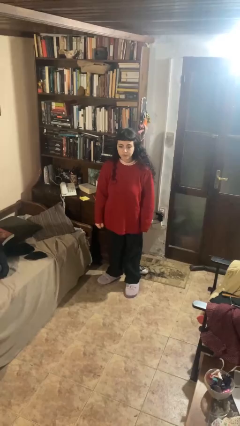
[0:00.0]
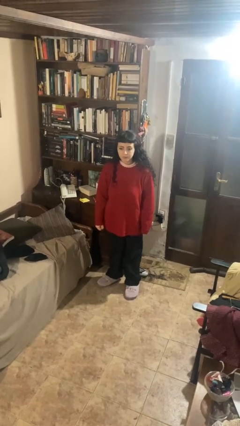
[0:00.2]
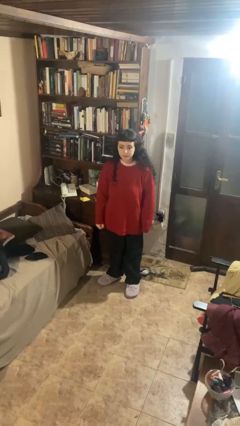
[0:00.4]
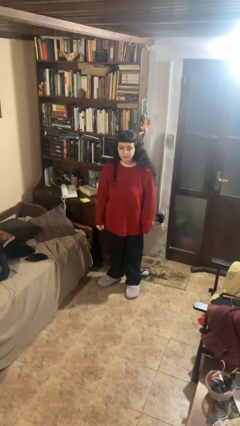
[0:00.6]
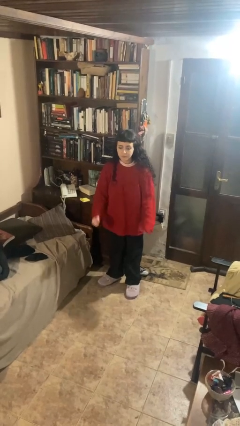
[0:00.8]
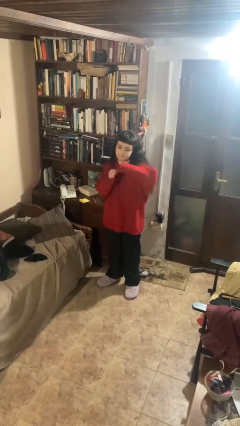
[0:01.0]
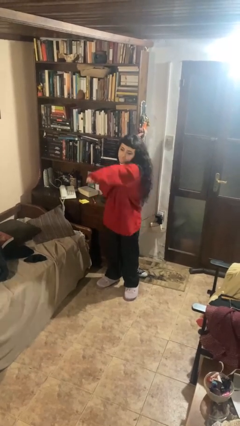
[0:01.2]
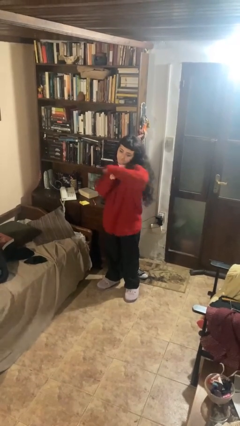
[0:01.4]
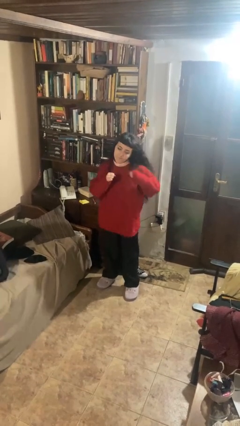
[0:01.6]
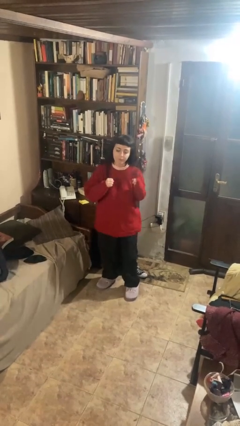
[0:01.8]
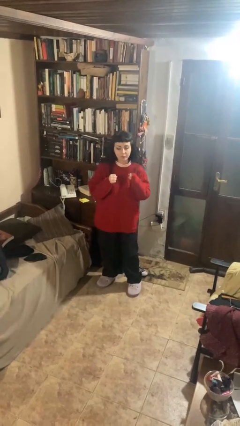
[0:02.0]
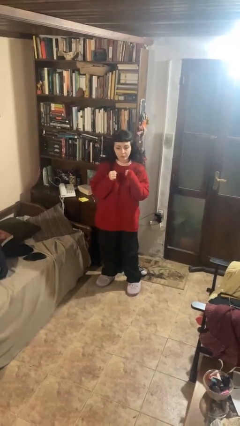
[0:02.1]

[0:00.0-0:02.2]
person punches

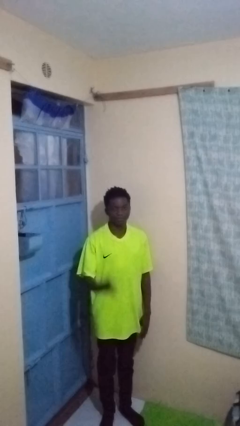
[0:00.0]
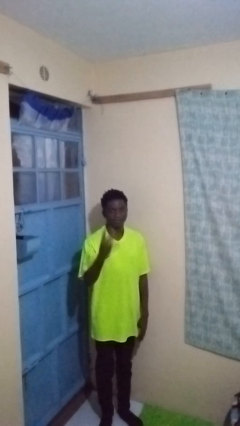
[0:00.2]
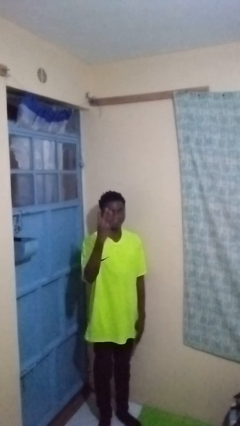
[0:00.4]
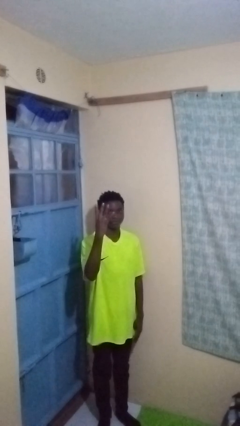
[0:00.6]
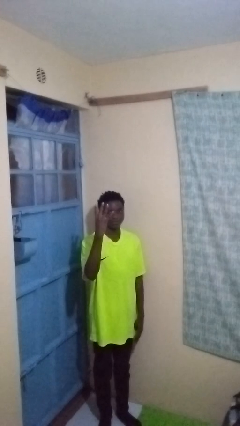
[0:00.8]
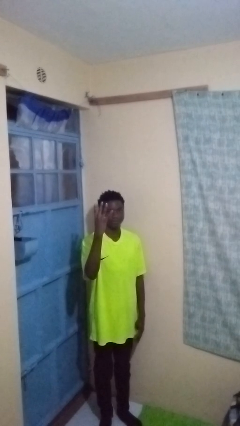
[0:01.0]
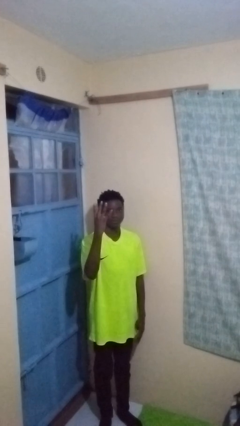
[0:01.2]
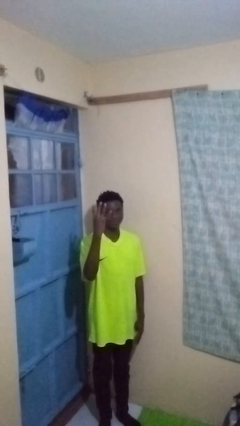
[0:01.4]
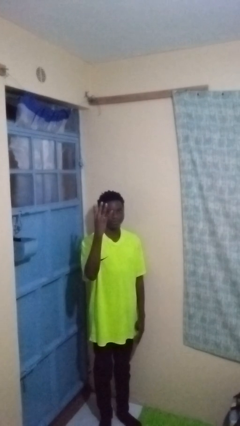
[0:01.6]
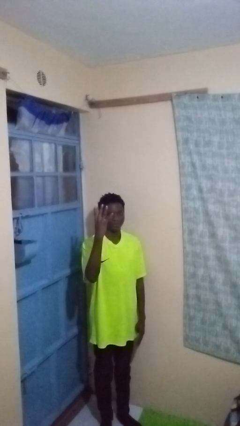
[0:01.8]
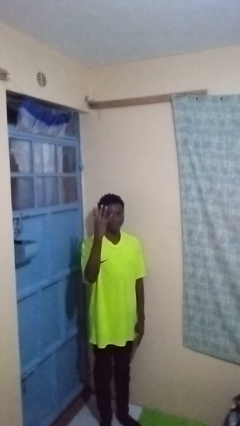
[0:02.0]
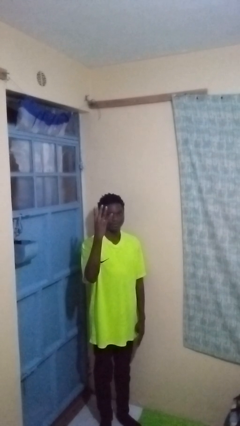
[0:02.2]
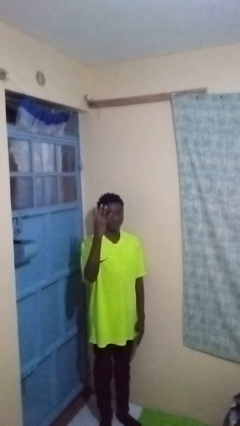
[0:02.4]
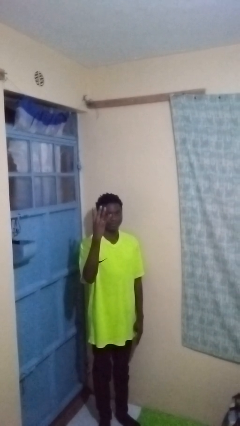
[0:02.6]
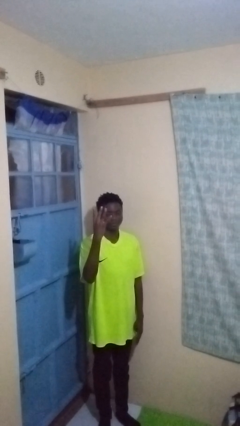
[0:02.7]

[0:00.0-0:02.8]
person gestures number four

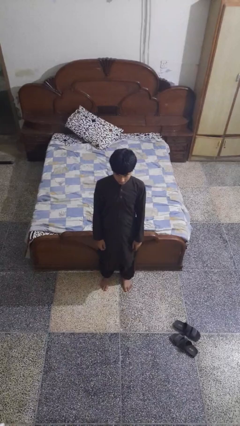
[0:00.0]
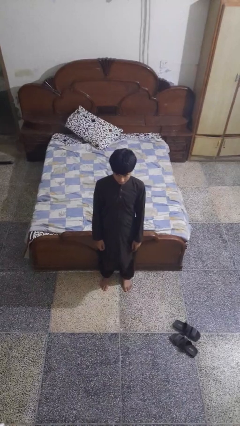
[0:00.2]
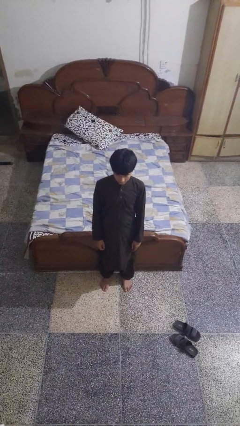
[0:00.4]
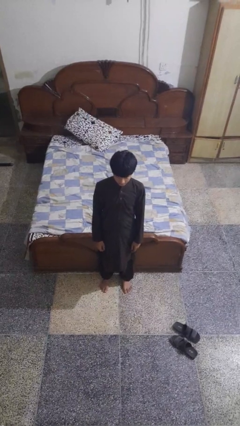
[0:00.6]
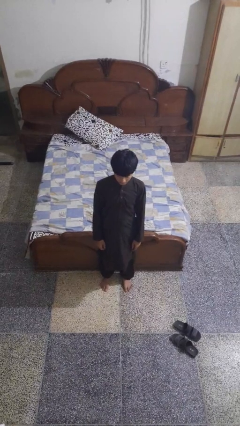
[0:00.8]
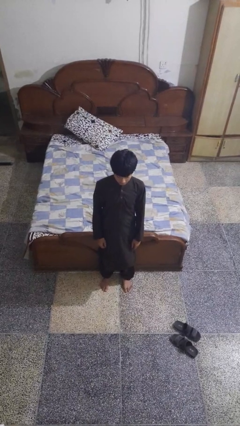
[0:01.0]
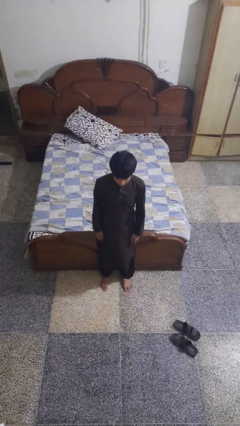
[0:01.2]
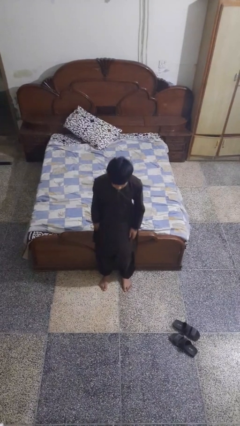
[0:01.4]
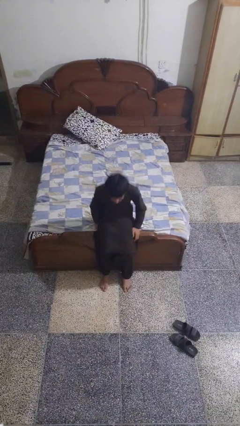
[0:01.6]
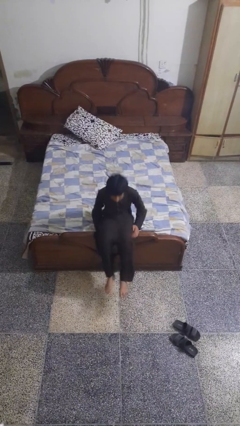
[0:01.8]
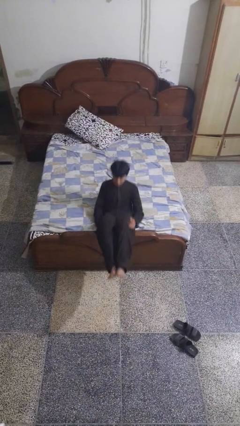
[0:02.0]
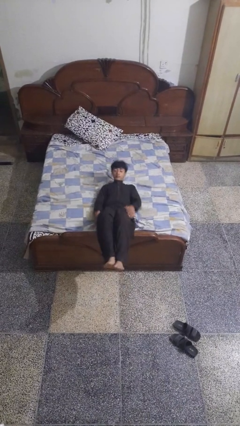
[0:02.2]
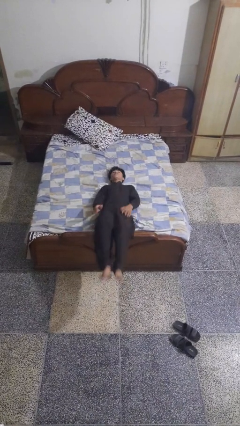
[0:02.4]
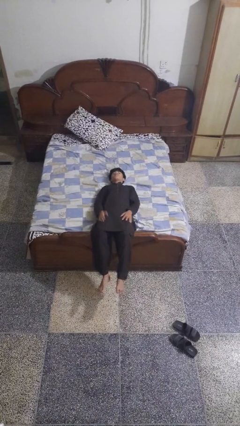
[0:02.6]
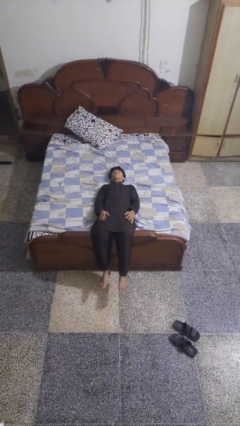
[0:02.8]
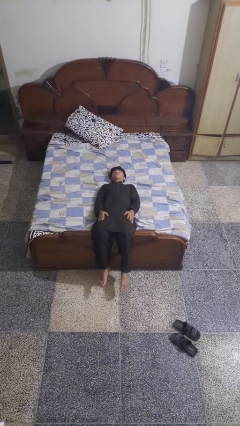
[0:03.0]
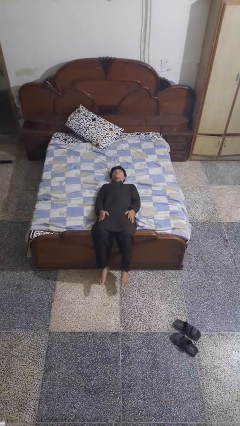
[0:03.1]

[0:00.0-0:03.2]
person lies down on bed

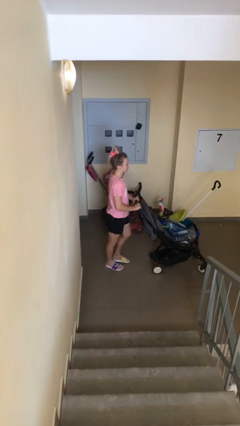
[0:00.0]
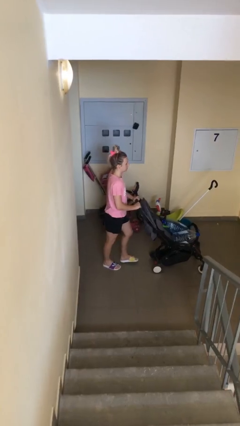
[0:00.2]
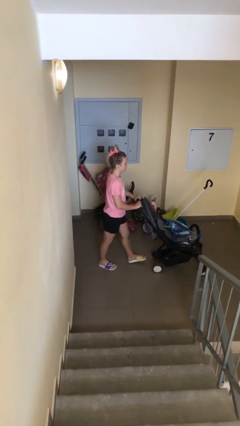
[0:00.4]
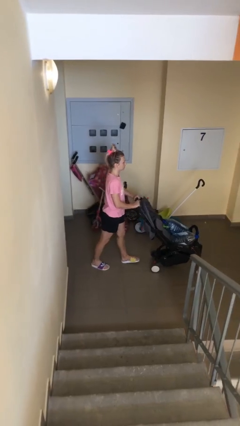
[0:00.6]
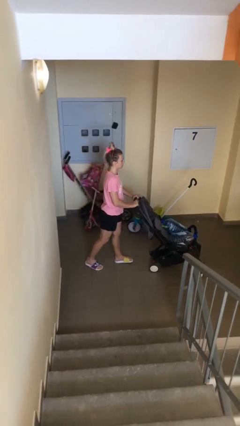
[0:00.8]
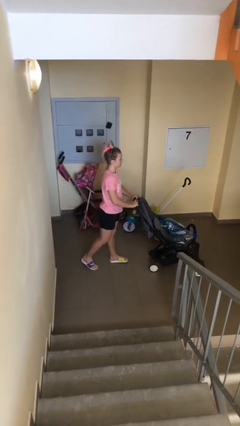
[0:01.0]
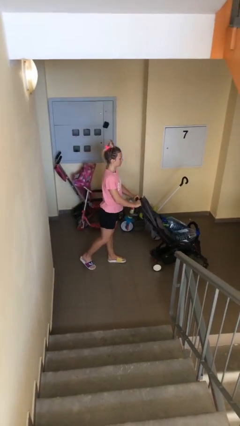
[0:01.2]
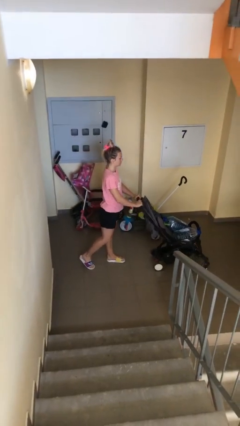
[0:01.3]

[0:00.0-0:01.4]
person pushes wheeled cart

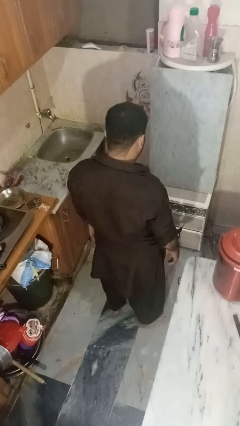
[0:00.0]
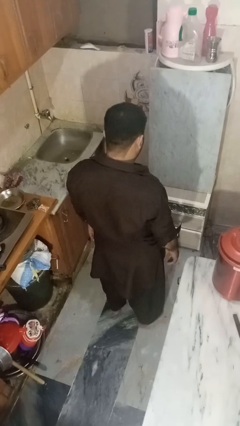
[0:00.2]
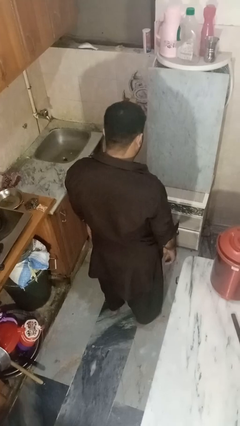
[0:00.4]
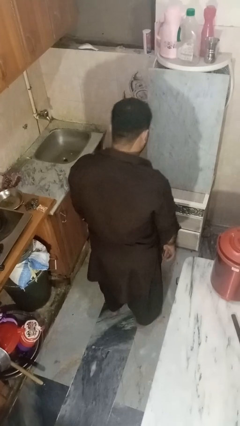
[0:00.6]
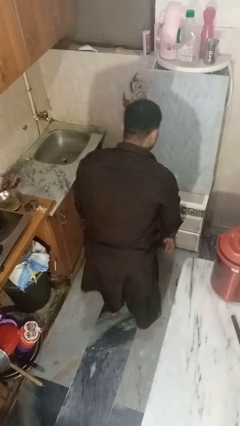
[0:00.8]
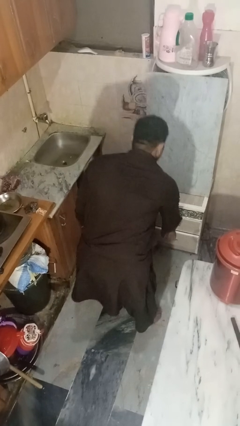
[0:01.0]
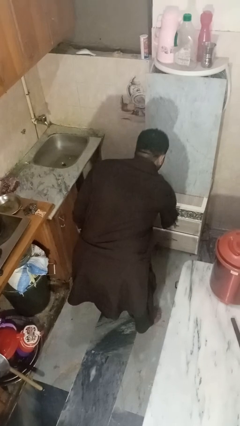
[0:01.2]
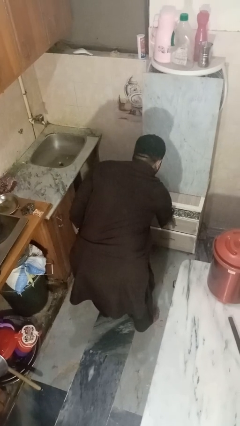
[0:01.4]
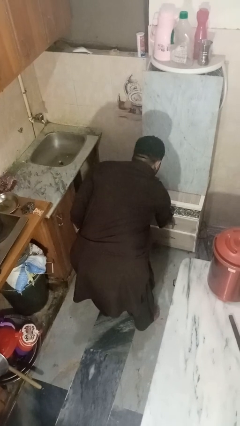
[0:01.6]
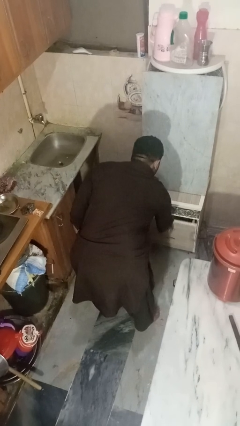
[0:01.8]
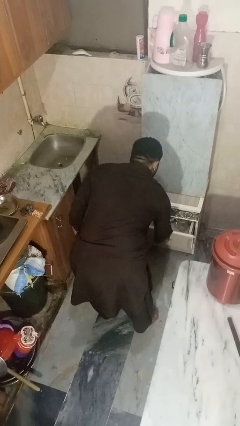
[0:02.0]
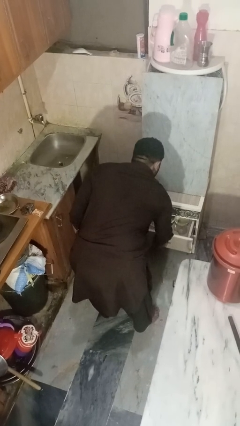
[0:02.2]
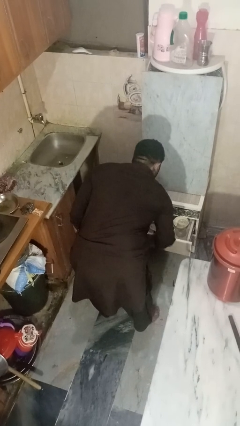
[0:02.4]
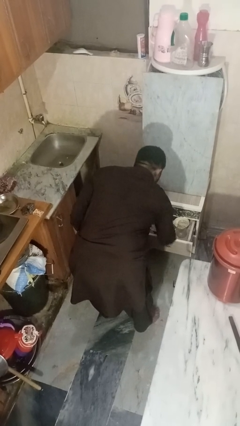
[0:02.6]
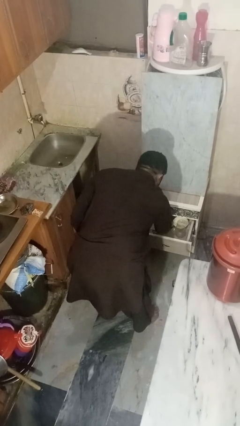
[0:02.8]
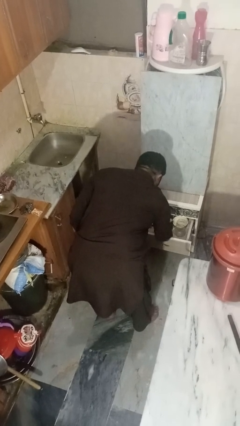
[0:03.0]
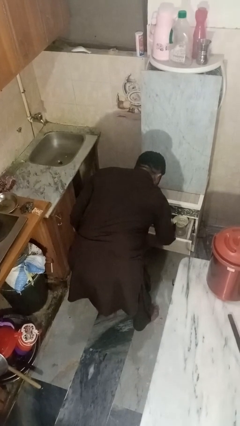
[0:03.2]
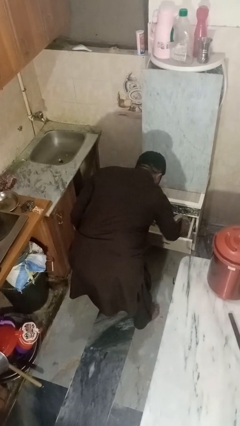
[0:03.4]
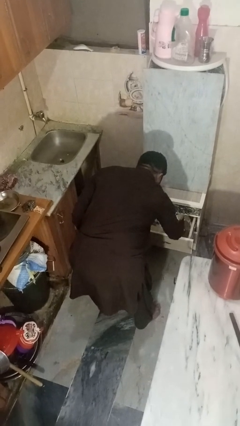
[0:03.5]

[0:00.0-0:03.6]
person searches in kitchen drawer

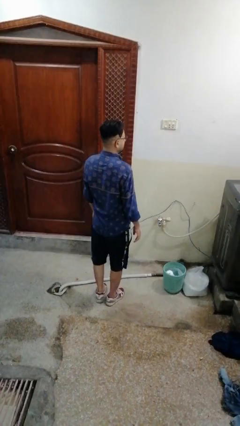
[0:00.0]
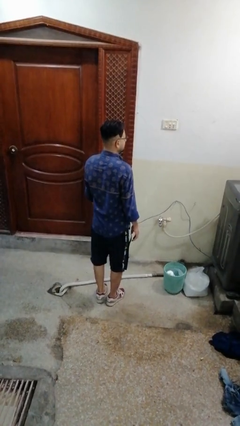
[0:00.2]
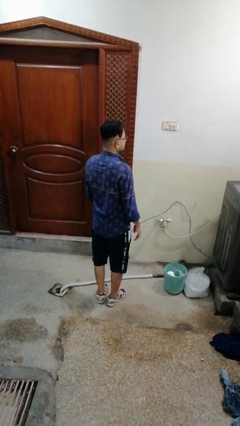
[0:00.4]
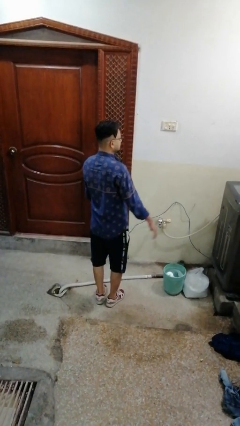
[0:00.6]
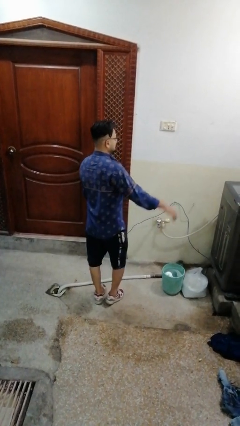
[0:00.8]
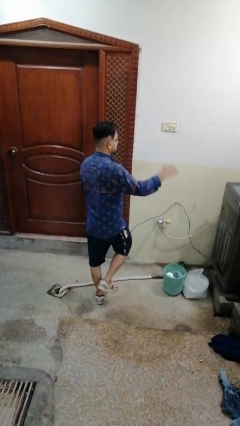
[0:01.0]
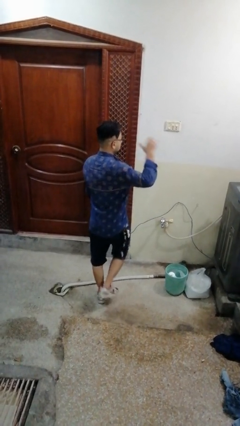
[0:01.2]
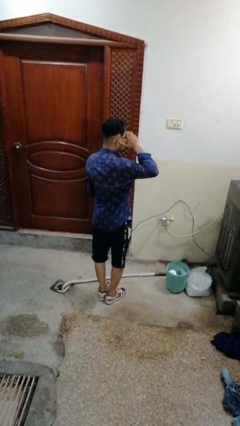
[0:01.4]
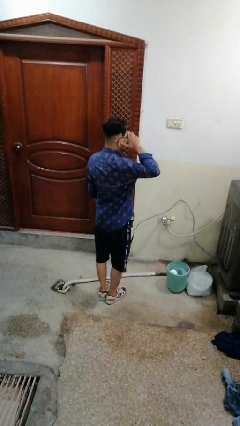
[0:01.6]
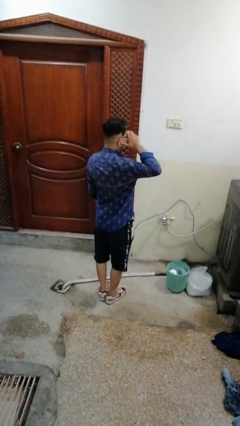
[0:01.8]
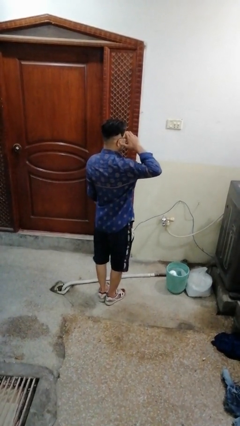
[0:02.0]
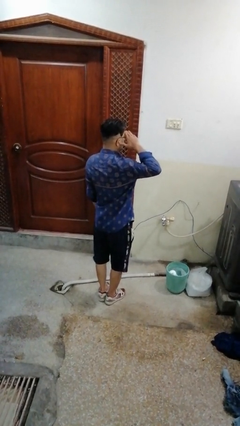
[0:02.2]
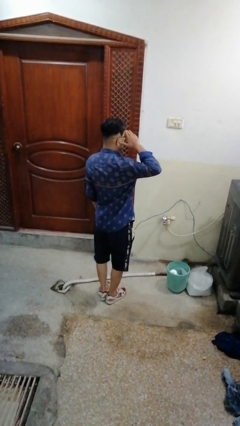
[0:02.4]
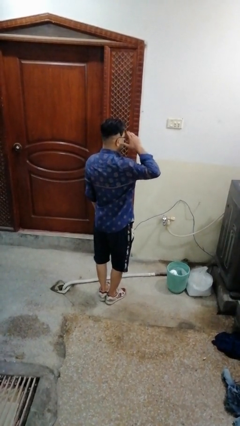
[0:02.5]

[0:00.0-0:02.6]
person salutes

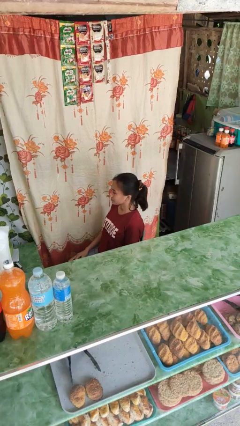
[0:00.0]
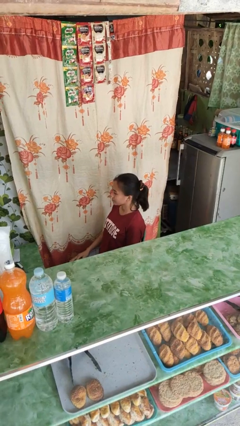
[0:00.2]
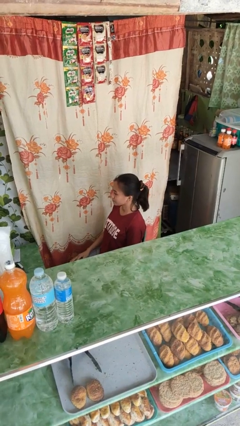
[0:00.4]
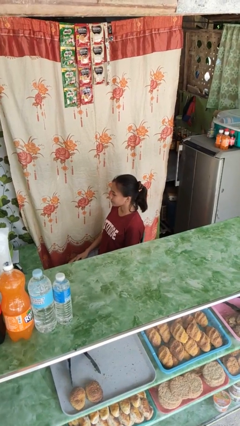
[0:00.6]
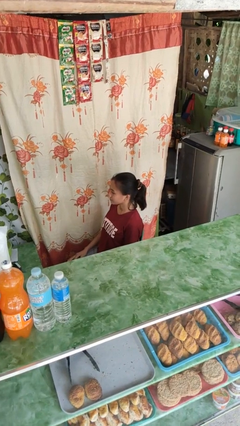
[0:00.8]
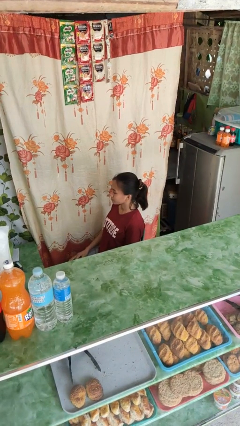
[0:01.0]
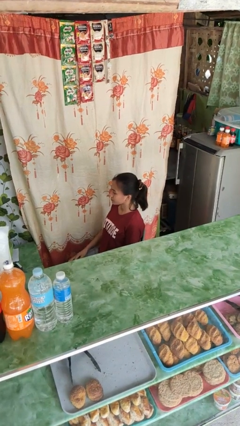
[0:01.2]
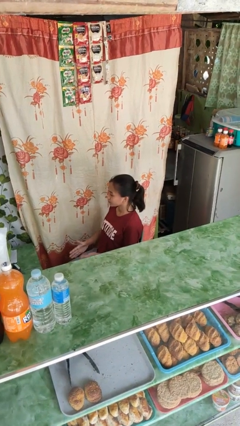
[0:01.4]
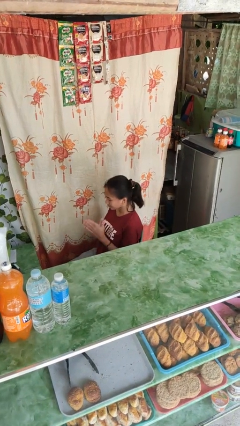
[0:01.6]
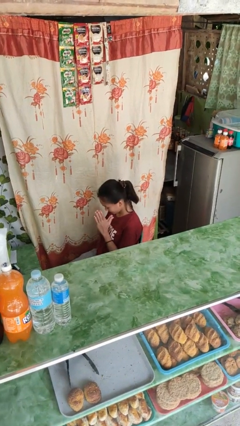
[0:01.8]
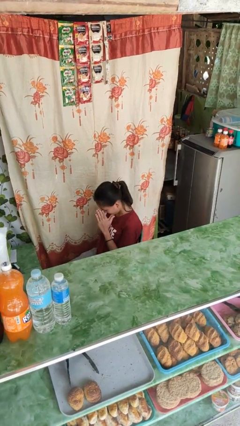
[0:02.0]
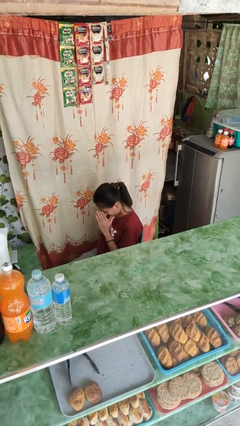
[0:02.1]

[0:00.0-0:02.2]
person rubs eyes
